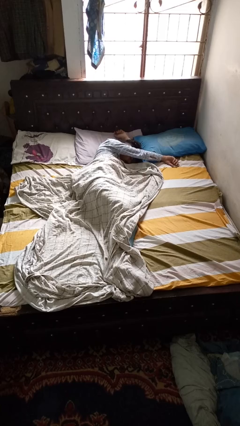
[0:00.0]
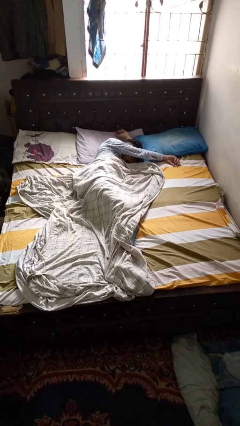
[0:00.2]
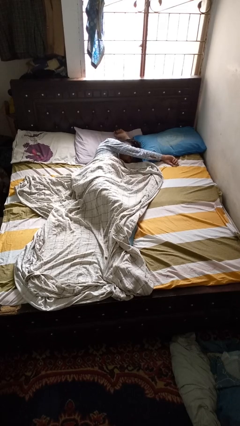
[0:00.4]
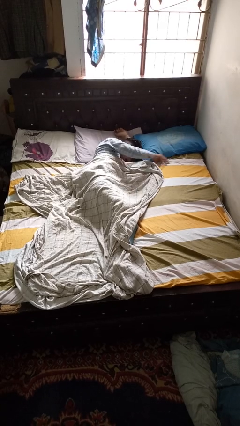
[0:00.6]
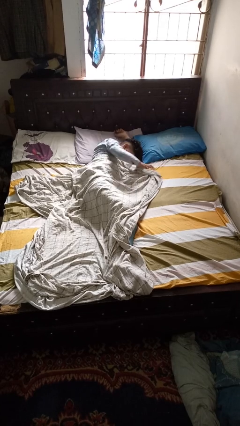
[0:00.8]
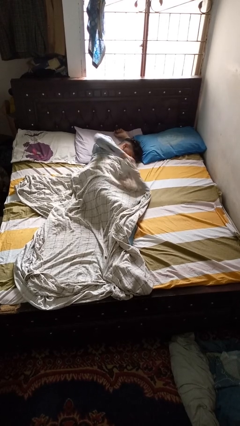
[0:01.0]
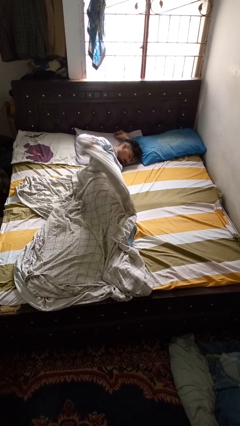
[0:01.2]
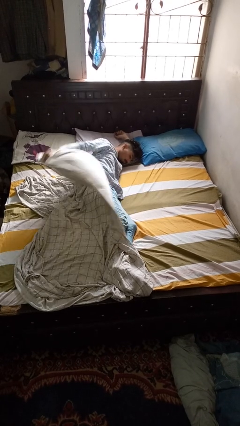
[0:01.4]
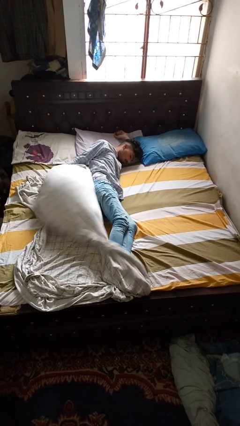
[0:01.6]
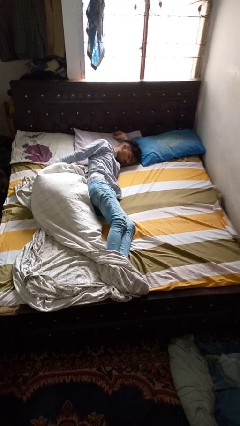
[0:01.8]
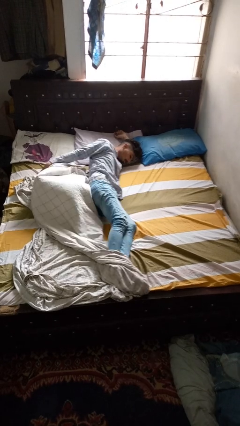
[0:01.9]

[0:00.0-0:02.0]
person uncovers with bedsheets

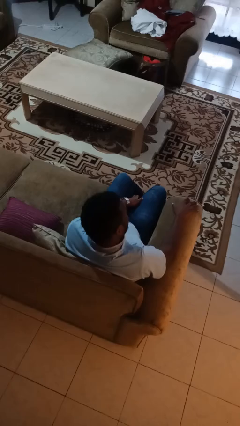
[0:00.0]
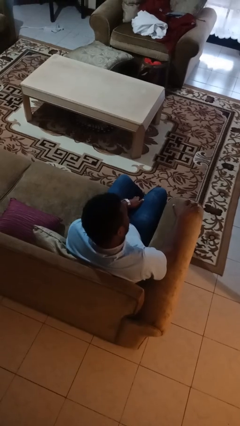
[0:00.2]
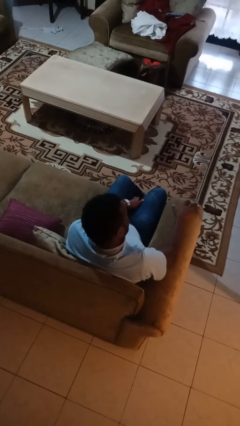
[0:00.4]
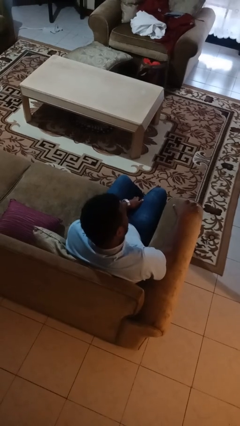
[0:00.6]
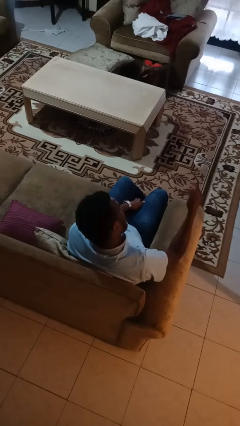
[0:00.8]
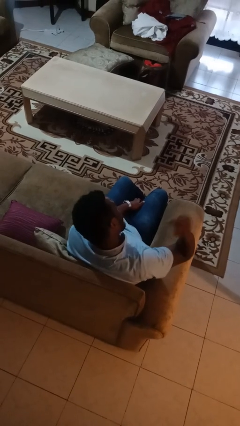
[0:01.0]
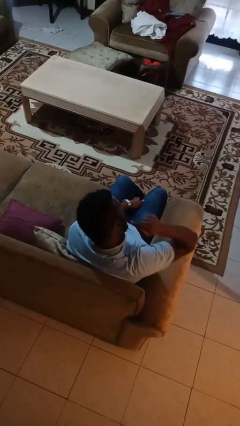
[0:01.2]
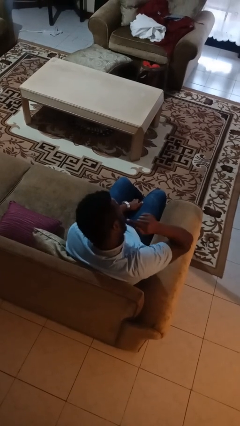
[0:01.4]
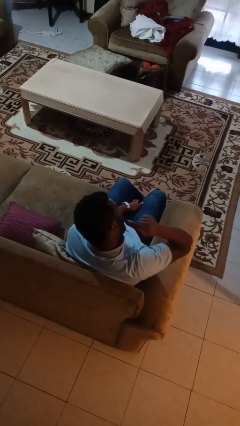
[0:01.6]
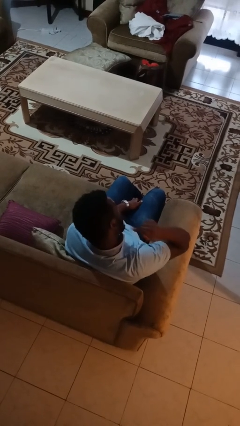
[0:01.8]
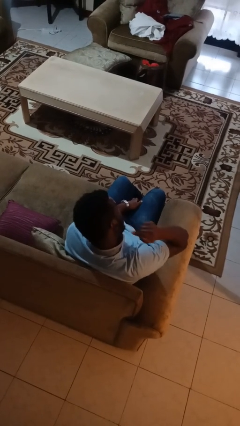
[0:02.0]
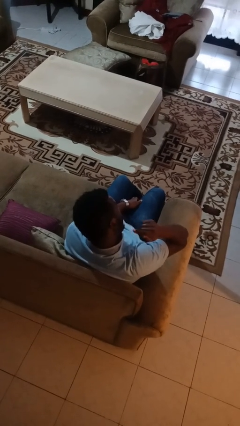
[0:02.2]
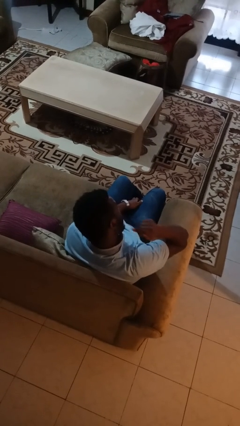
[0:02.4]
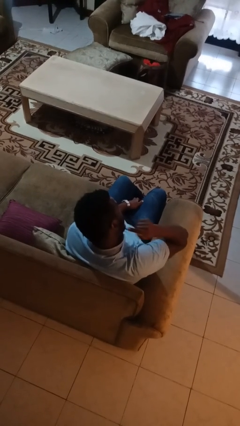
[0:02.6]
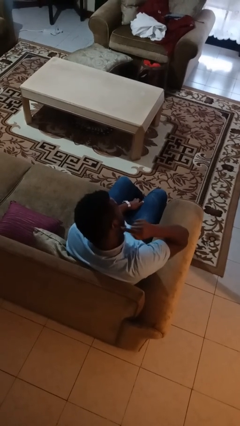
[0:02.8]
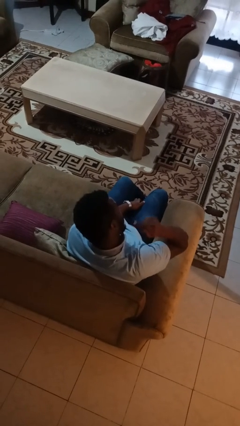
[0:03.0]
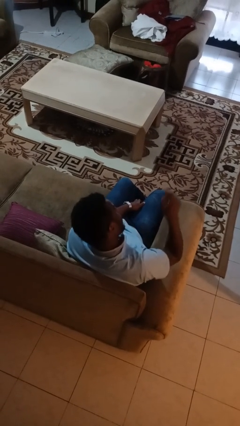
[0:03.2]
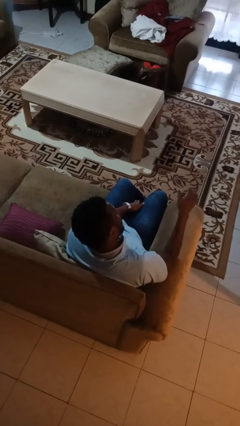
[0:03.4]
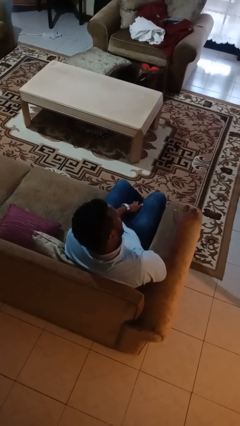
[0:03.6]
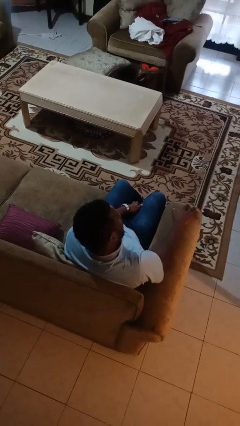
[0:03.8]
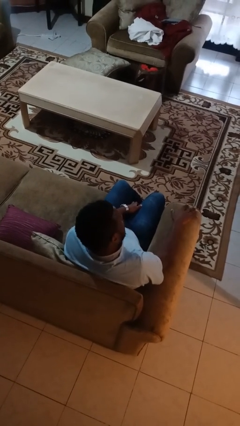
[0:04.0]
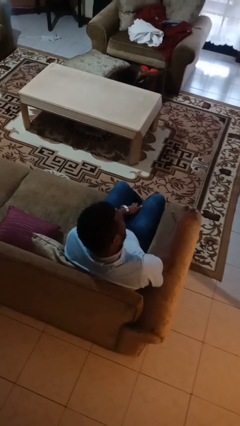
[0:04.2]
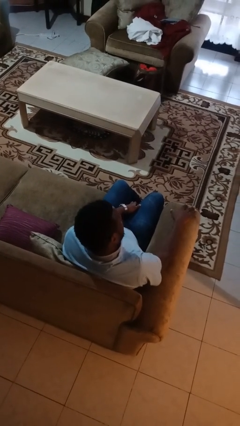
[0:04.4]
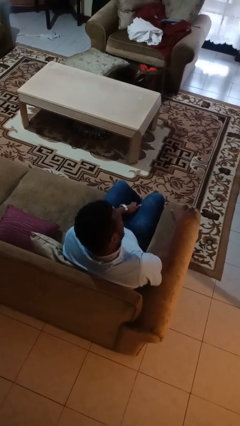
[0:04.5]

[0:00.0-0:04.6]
person gestures listen closely

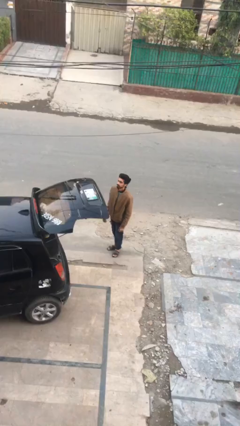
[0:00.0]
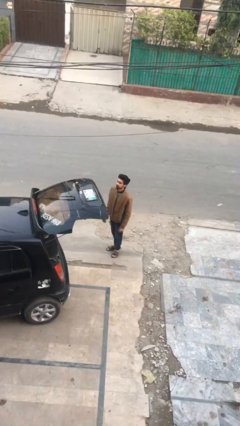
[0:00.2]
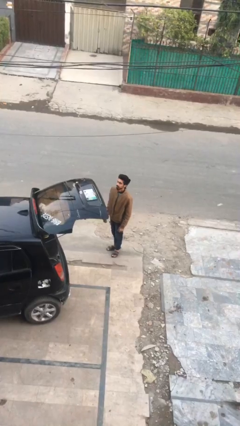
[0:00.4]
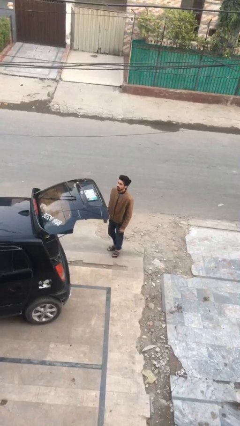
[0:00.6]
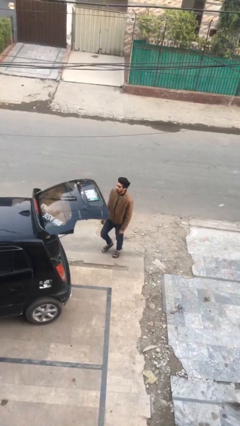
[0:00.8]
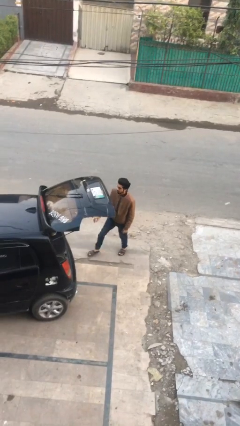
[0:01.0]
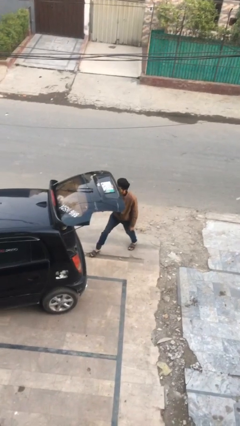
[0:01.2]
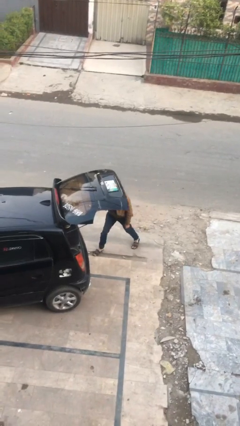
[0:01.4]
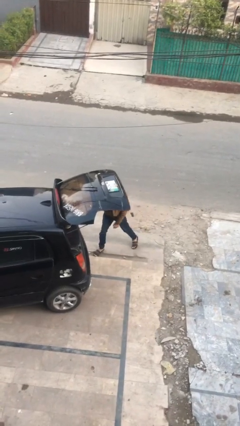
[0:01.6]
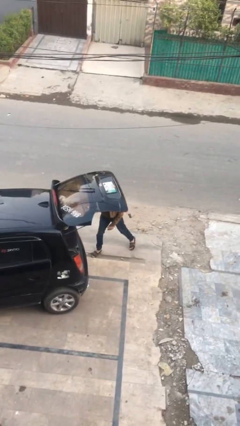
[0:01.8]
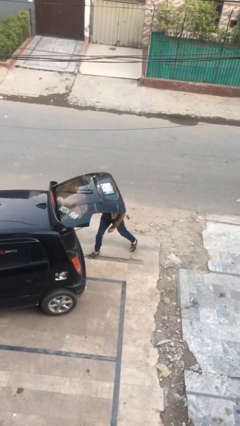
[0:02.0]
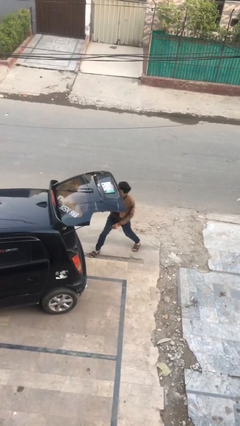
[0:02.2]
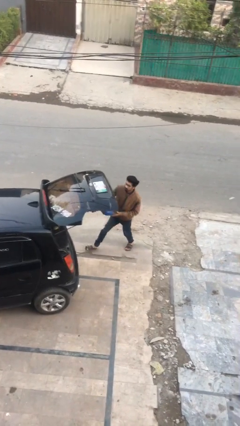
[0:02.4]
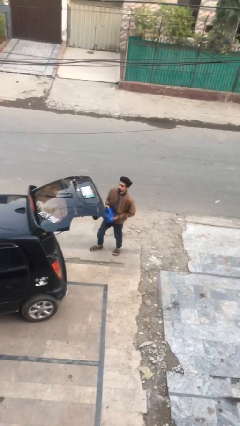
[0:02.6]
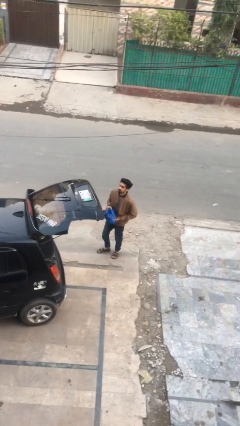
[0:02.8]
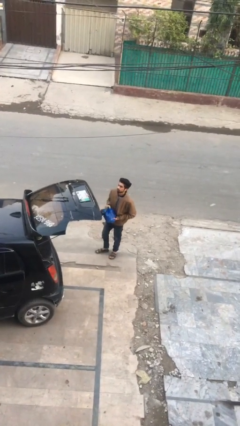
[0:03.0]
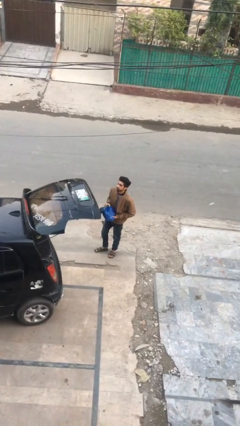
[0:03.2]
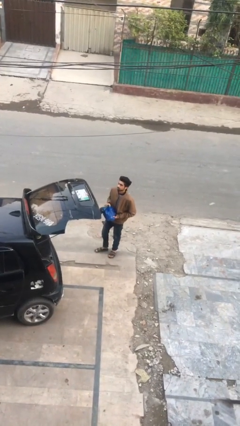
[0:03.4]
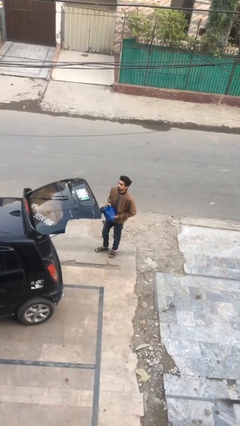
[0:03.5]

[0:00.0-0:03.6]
person unloads car

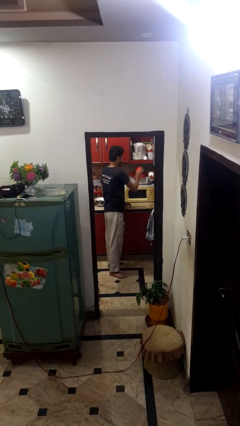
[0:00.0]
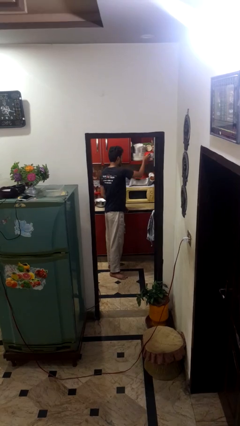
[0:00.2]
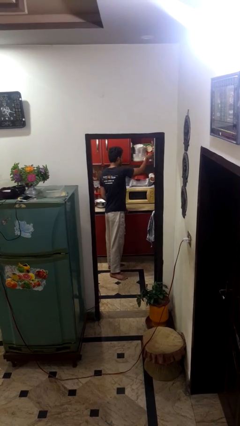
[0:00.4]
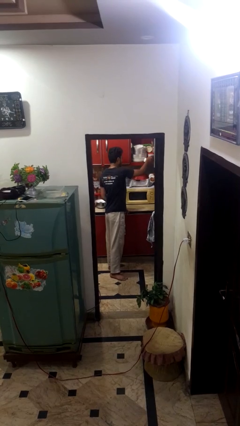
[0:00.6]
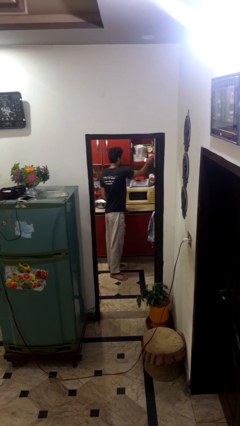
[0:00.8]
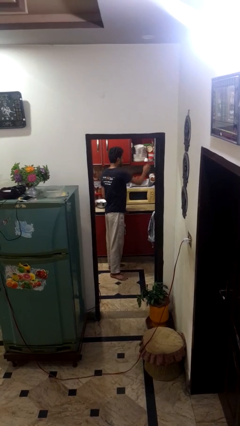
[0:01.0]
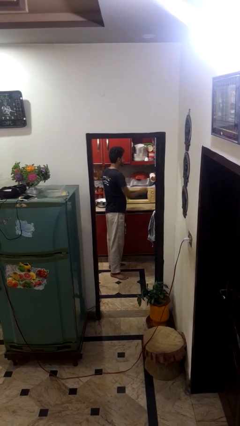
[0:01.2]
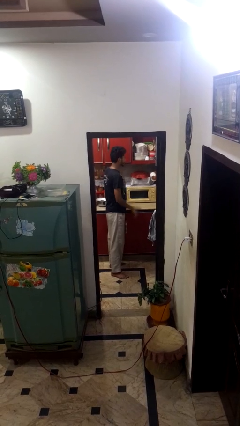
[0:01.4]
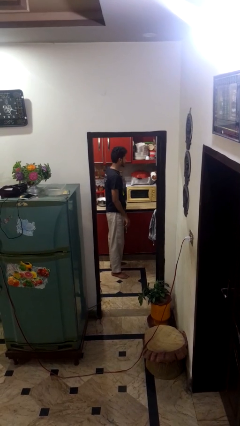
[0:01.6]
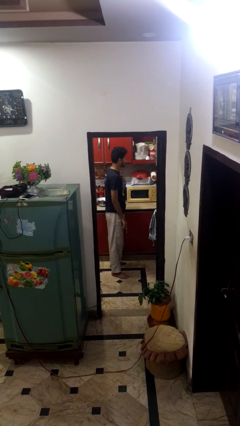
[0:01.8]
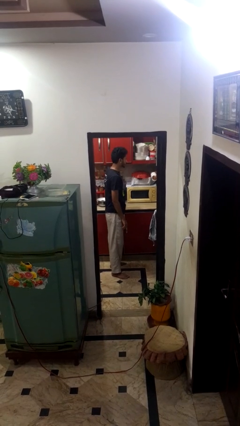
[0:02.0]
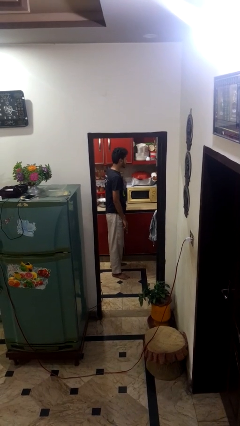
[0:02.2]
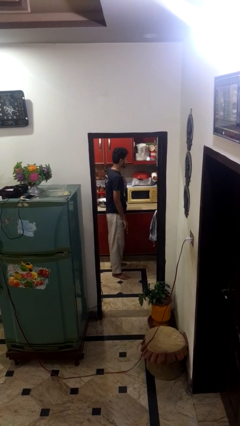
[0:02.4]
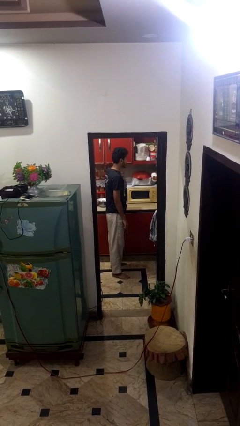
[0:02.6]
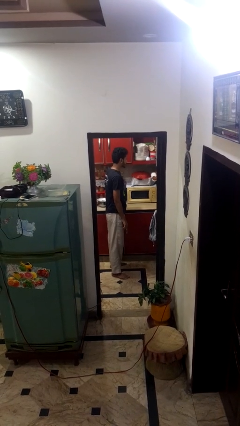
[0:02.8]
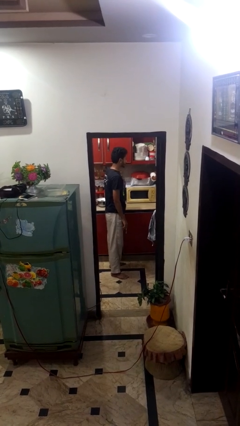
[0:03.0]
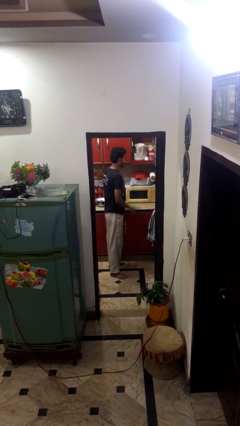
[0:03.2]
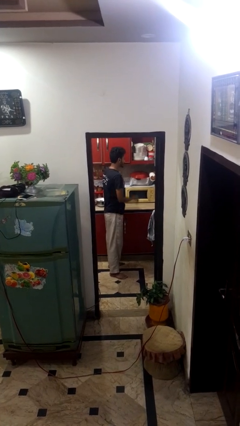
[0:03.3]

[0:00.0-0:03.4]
person puts down object into cabinet

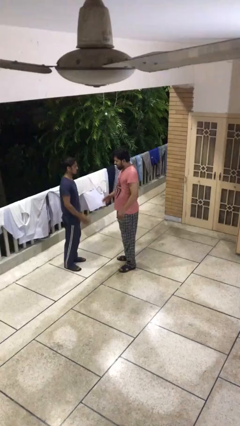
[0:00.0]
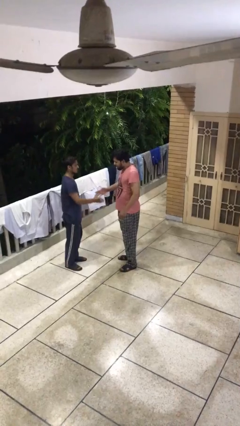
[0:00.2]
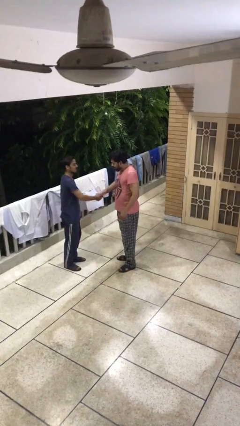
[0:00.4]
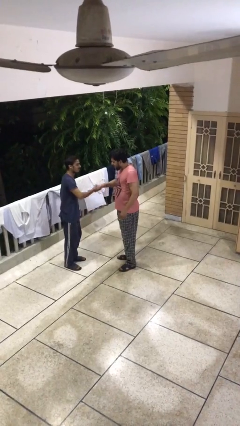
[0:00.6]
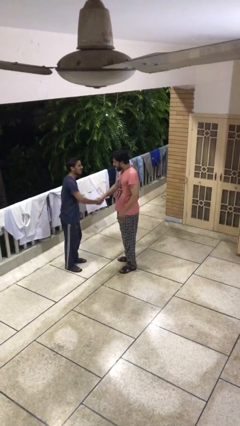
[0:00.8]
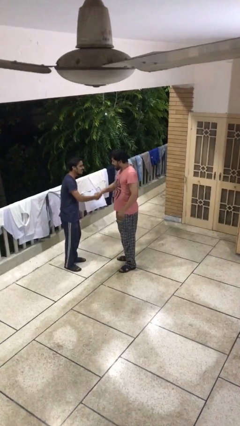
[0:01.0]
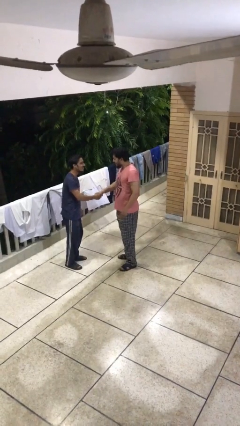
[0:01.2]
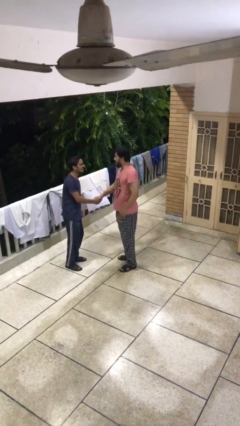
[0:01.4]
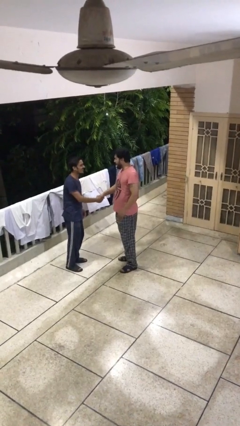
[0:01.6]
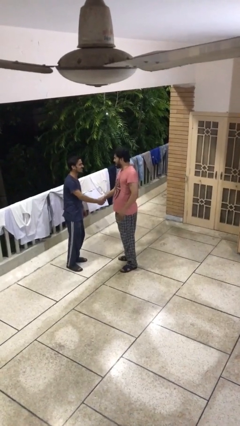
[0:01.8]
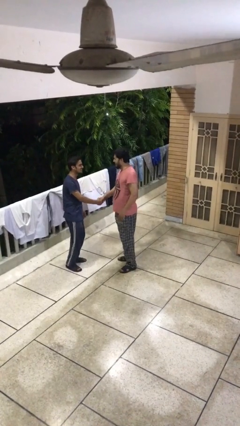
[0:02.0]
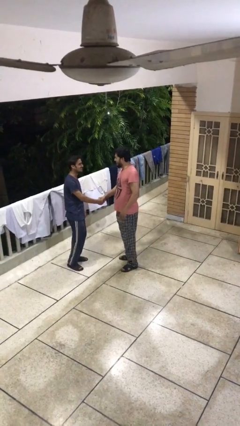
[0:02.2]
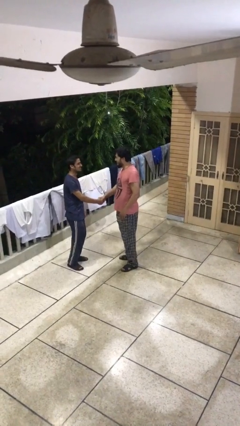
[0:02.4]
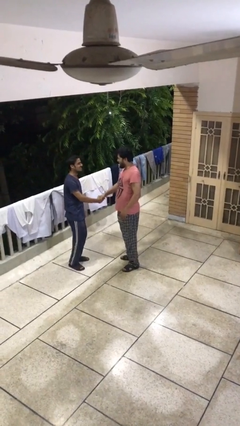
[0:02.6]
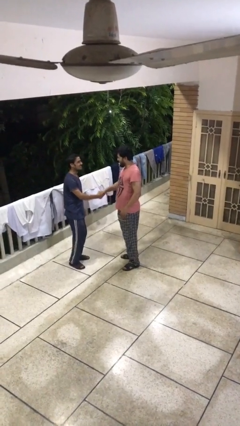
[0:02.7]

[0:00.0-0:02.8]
person shakes hand

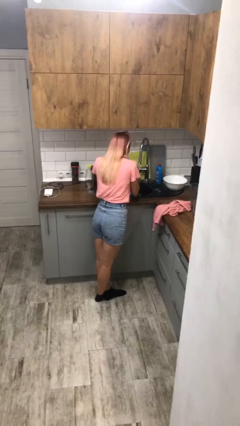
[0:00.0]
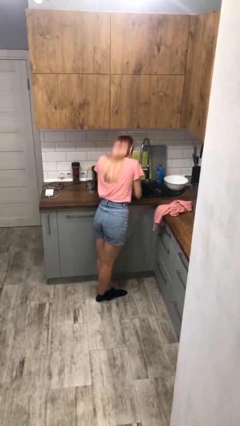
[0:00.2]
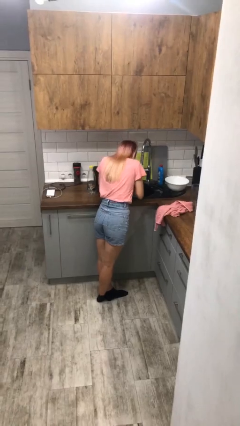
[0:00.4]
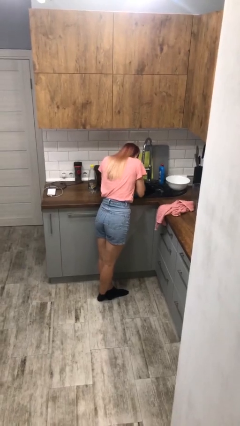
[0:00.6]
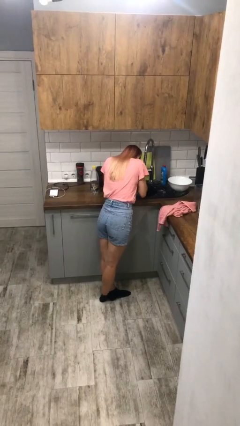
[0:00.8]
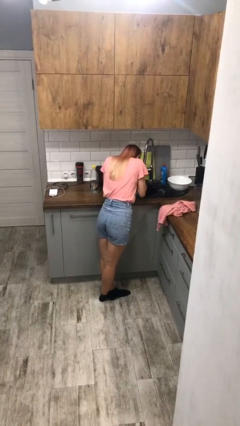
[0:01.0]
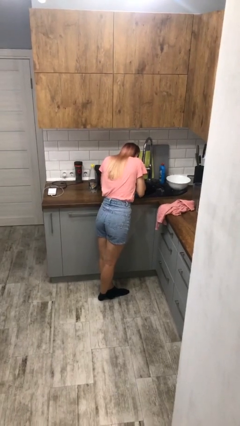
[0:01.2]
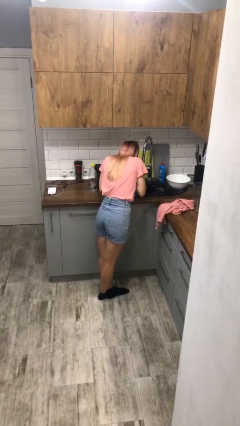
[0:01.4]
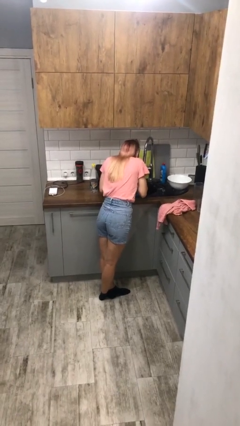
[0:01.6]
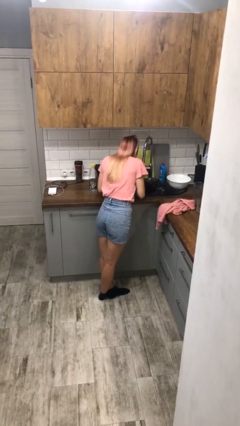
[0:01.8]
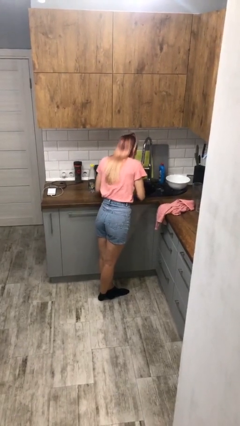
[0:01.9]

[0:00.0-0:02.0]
person washes face
